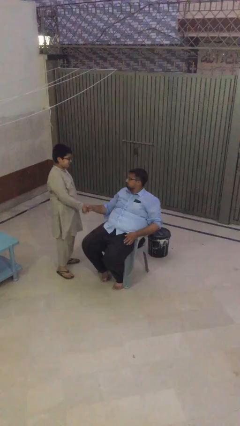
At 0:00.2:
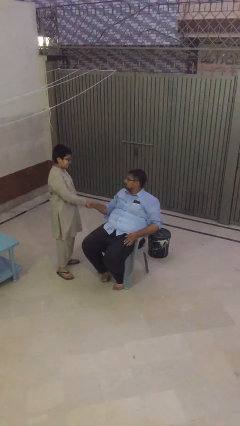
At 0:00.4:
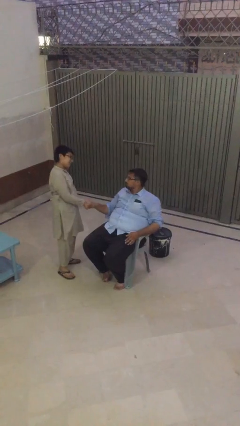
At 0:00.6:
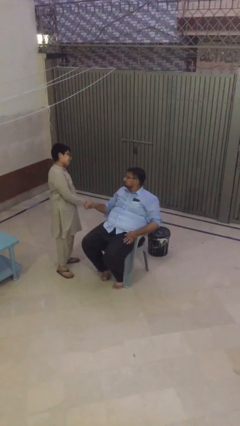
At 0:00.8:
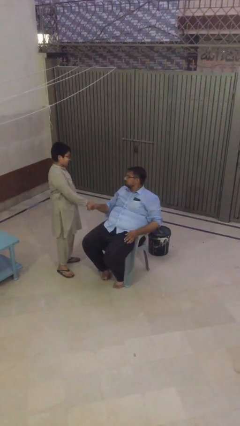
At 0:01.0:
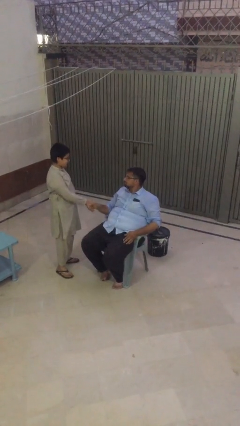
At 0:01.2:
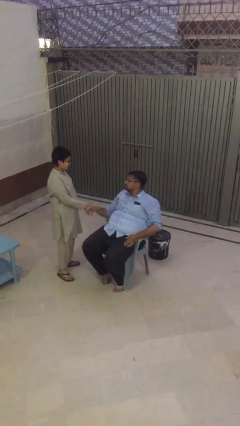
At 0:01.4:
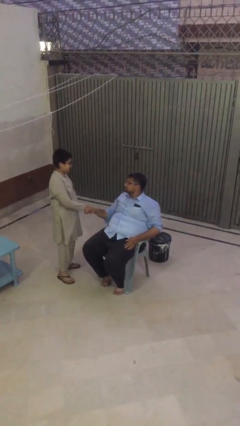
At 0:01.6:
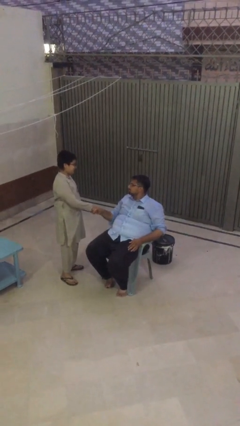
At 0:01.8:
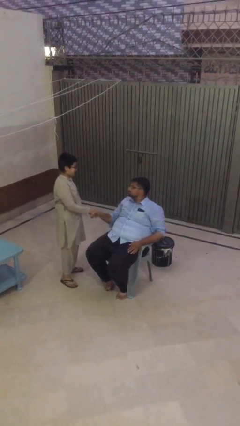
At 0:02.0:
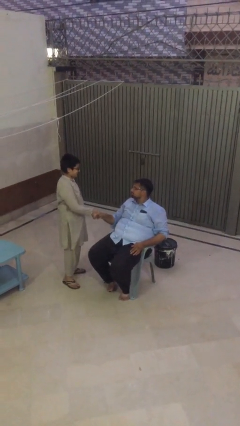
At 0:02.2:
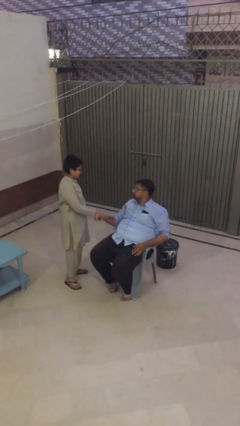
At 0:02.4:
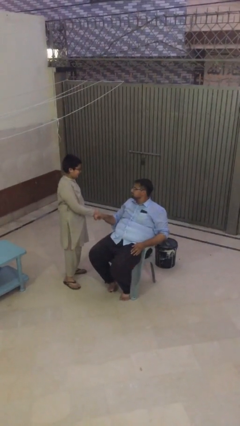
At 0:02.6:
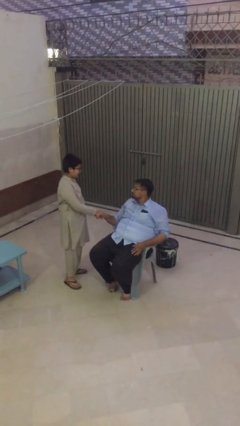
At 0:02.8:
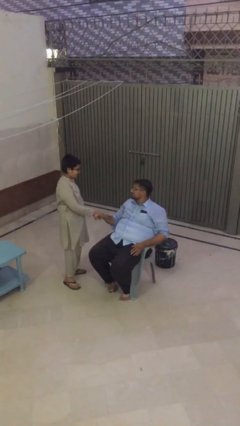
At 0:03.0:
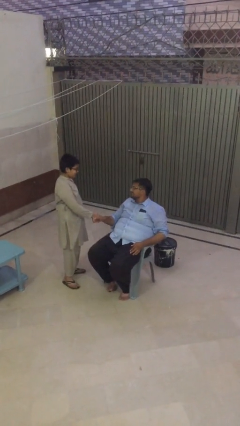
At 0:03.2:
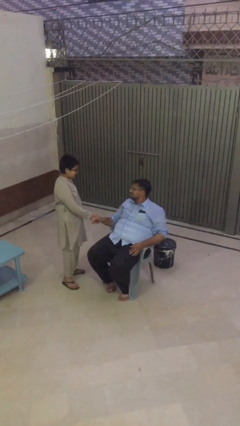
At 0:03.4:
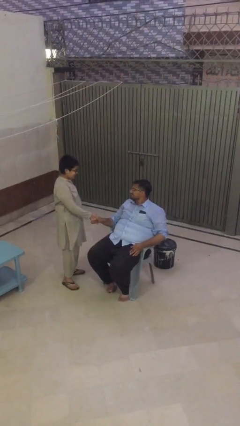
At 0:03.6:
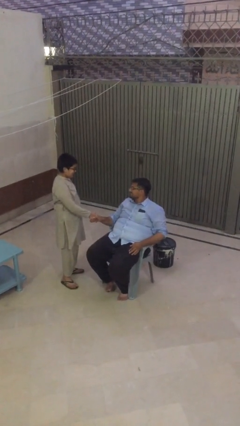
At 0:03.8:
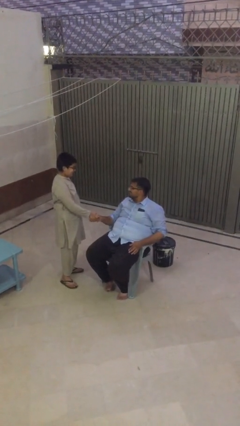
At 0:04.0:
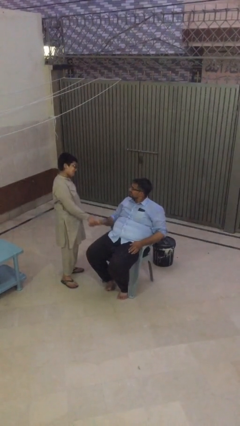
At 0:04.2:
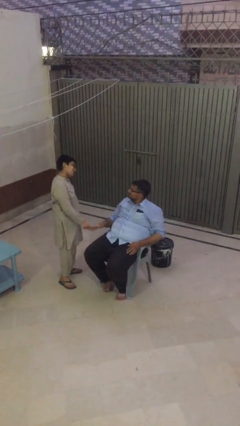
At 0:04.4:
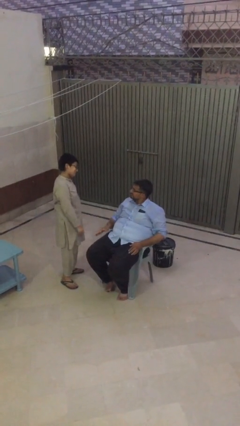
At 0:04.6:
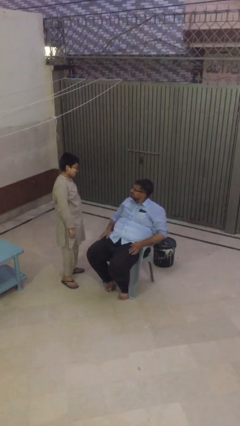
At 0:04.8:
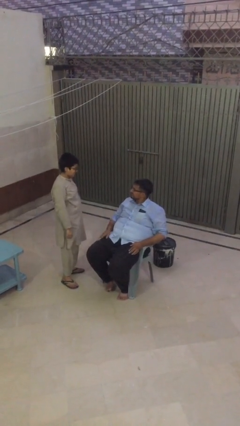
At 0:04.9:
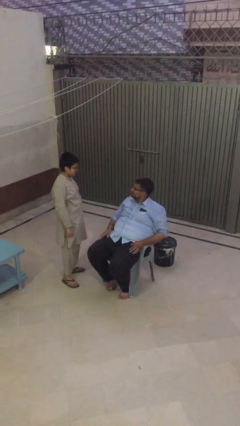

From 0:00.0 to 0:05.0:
person shakes hand

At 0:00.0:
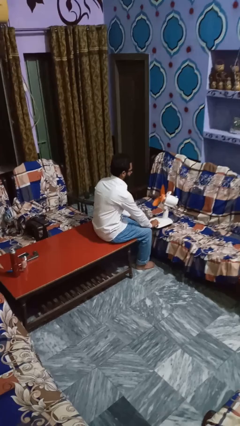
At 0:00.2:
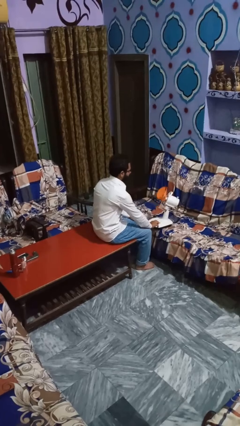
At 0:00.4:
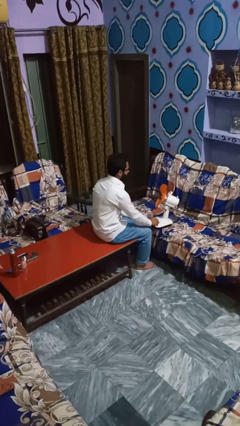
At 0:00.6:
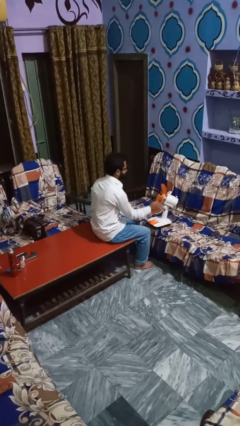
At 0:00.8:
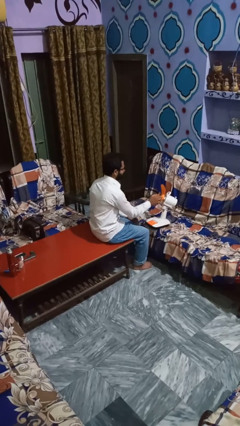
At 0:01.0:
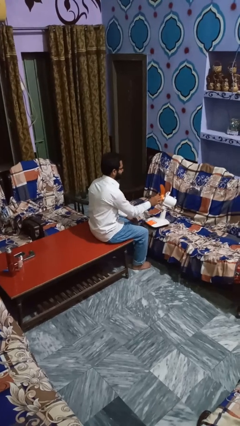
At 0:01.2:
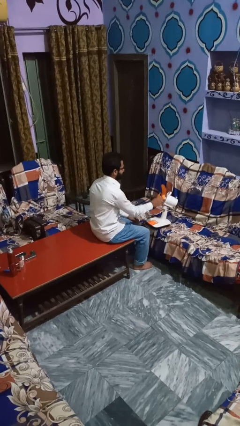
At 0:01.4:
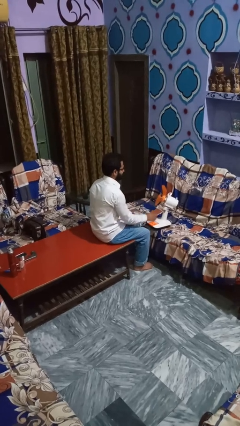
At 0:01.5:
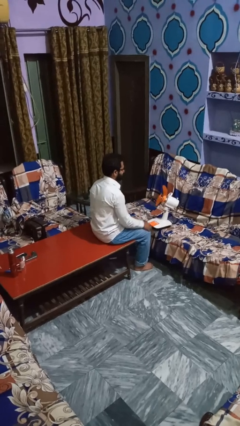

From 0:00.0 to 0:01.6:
person turns off fan

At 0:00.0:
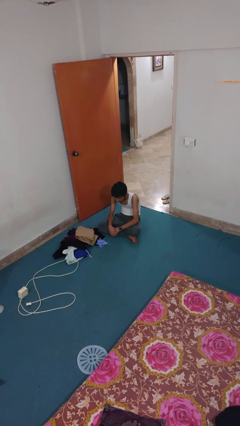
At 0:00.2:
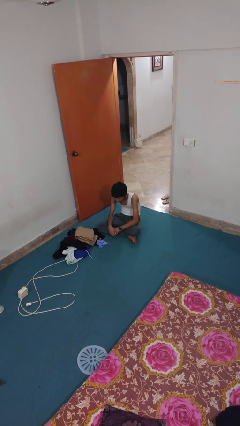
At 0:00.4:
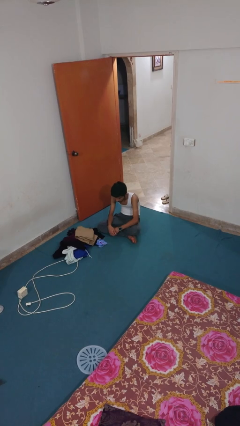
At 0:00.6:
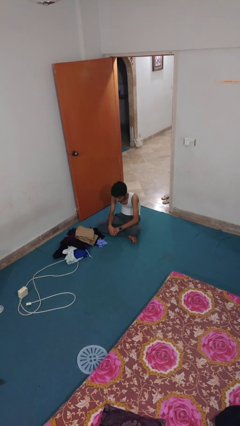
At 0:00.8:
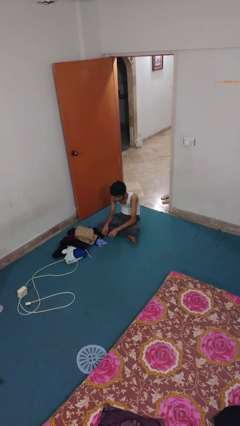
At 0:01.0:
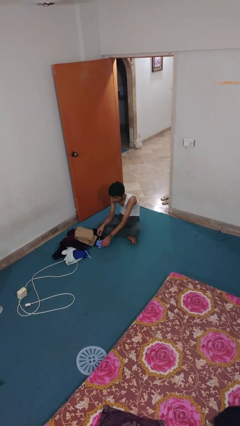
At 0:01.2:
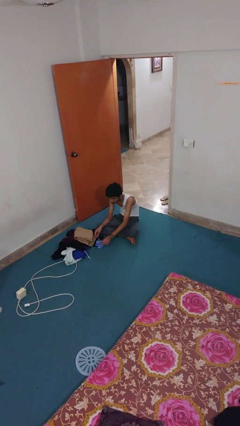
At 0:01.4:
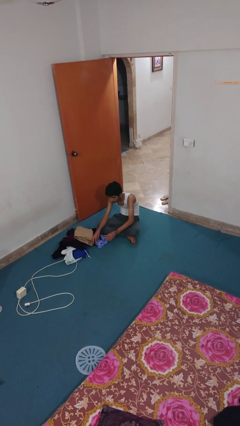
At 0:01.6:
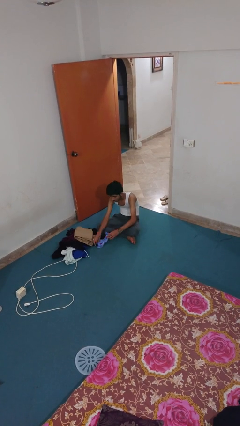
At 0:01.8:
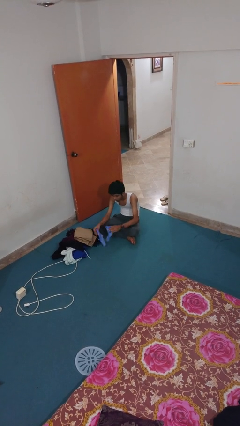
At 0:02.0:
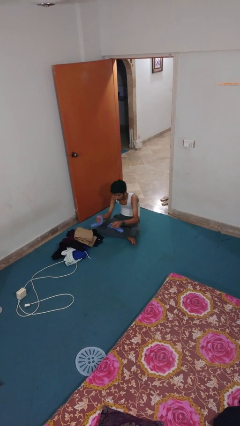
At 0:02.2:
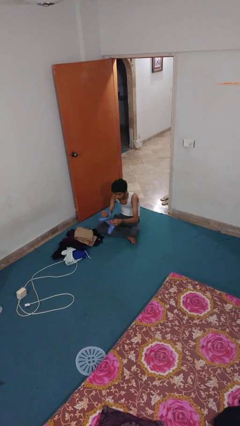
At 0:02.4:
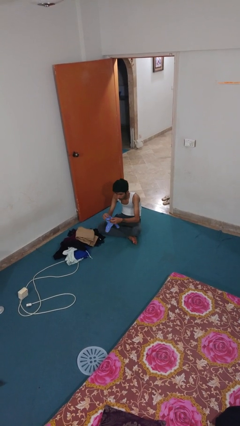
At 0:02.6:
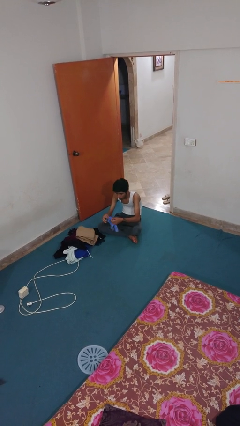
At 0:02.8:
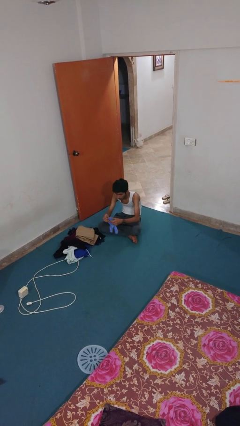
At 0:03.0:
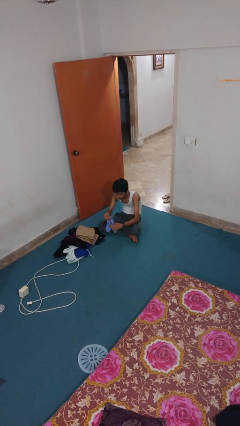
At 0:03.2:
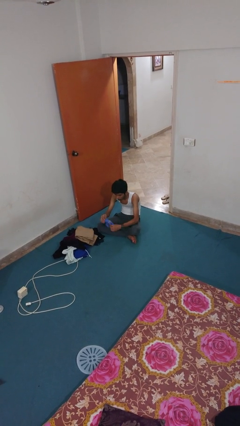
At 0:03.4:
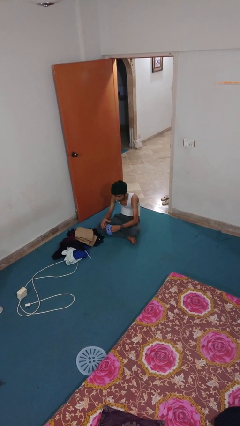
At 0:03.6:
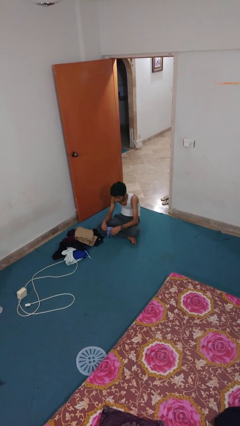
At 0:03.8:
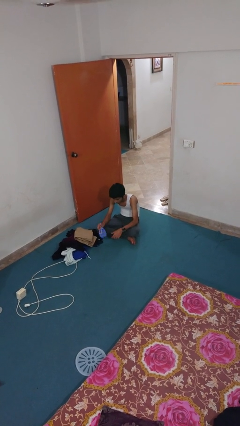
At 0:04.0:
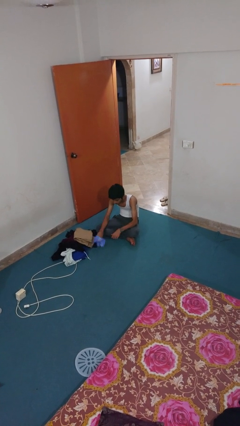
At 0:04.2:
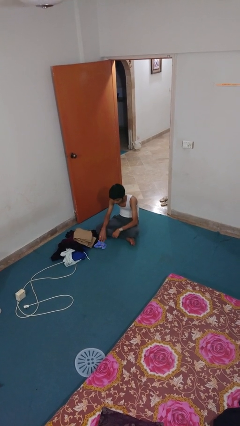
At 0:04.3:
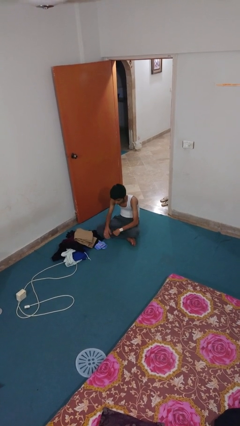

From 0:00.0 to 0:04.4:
person folds socks

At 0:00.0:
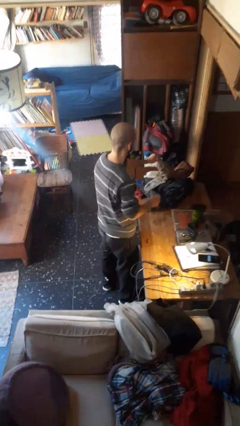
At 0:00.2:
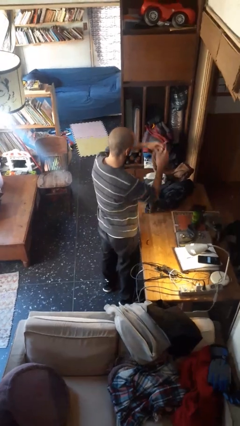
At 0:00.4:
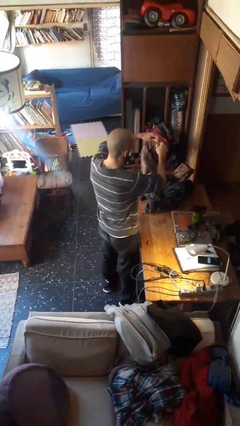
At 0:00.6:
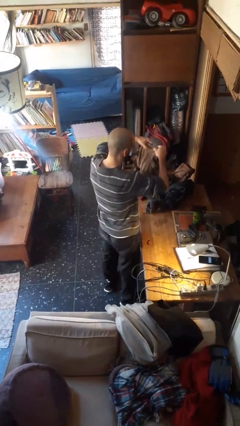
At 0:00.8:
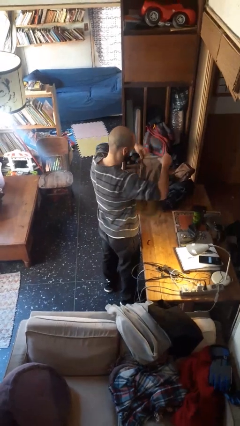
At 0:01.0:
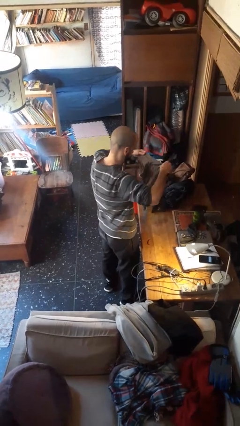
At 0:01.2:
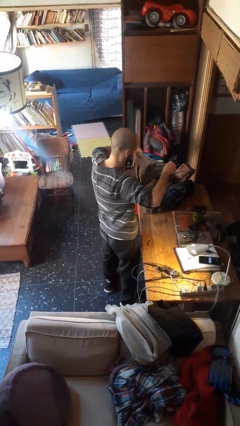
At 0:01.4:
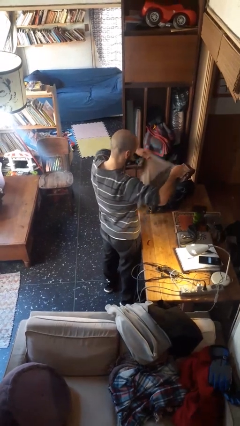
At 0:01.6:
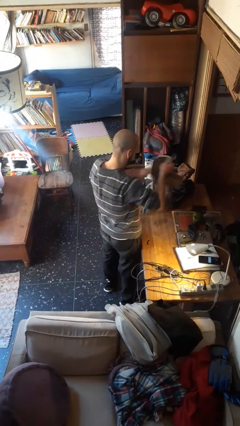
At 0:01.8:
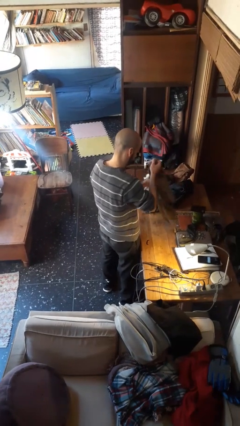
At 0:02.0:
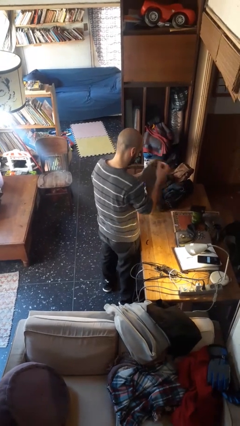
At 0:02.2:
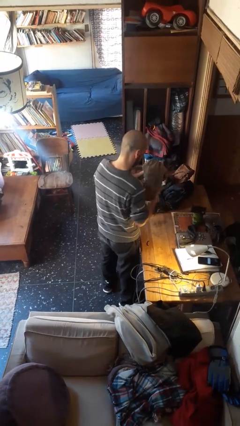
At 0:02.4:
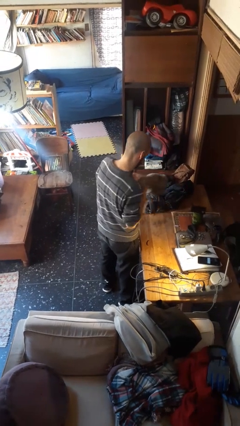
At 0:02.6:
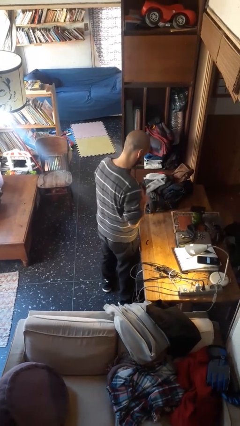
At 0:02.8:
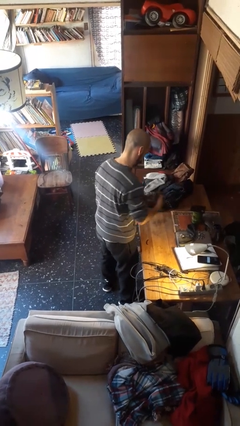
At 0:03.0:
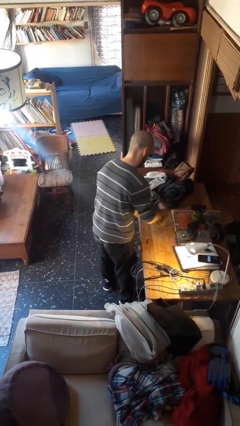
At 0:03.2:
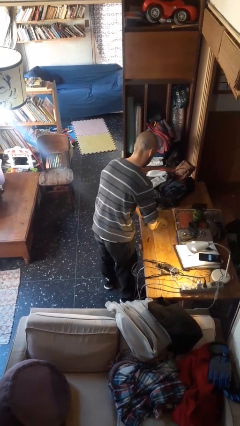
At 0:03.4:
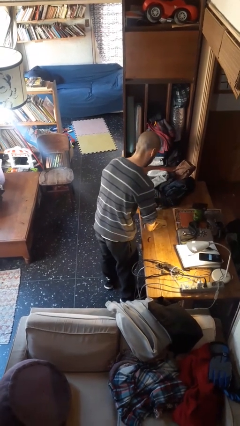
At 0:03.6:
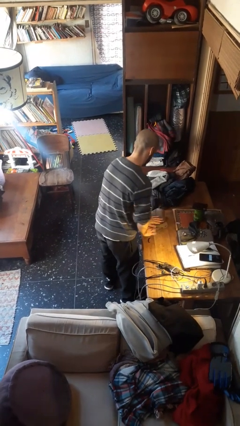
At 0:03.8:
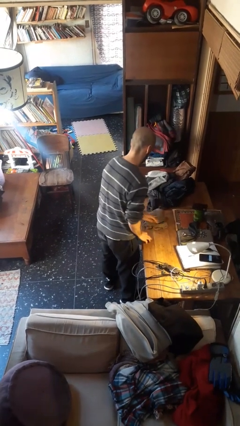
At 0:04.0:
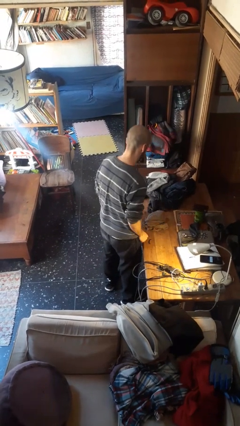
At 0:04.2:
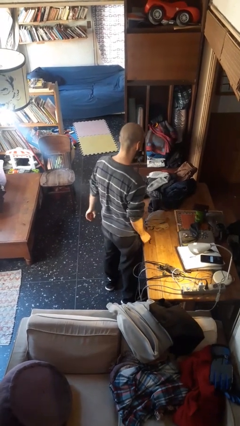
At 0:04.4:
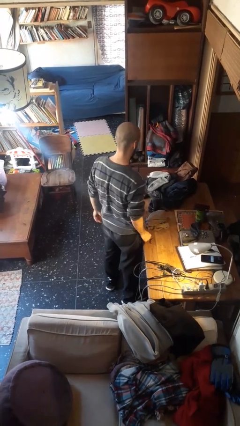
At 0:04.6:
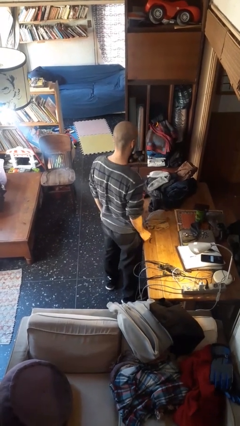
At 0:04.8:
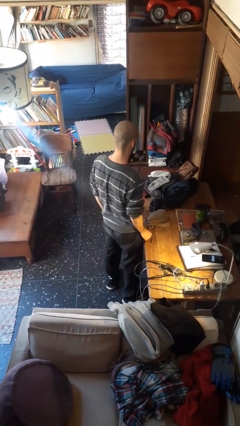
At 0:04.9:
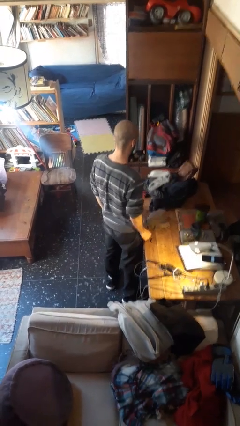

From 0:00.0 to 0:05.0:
person folds shirt

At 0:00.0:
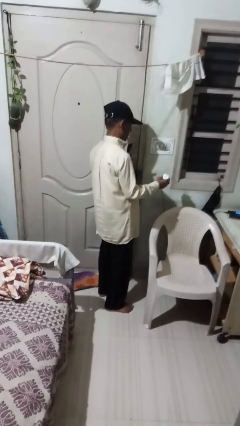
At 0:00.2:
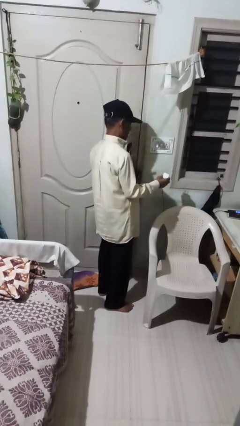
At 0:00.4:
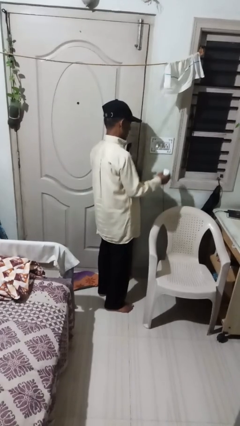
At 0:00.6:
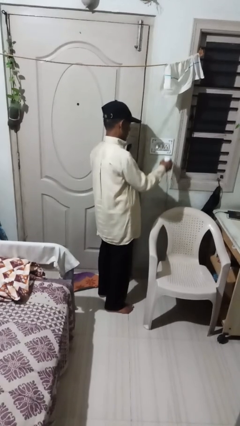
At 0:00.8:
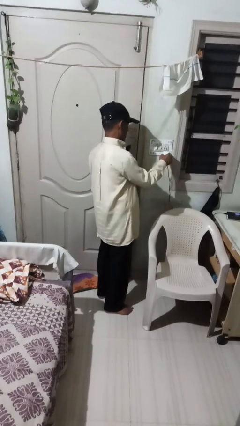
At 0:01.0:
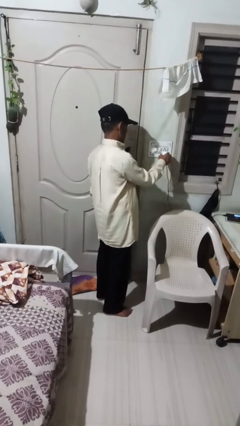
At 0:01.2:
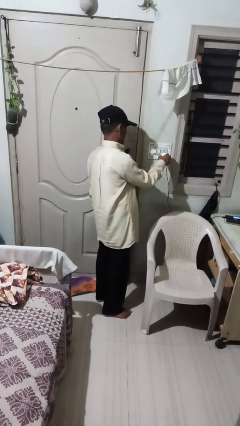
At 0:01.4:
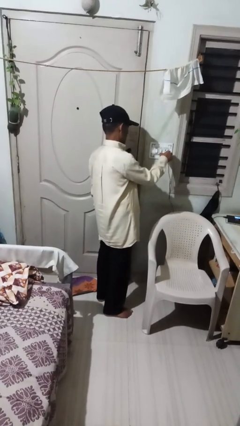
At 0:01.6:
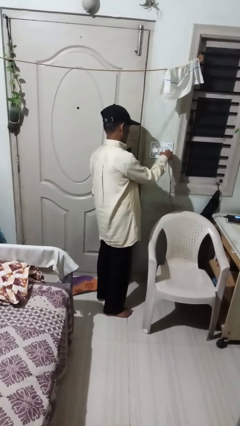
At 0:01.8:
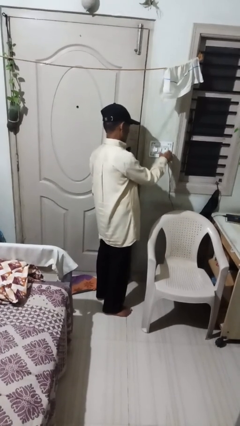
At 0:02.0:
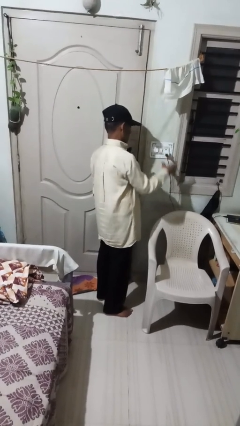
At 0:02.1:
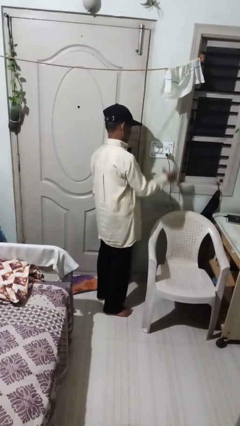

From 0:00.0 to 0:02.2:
person plugs into electrical socket
